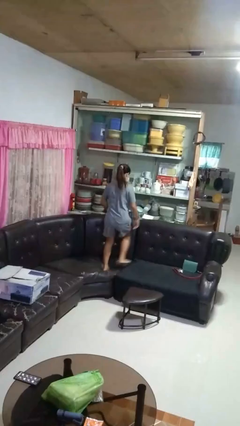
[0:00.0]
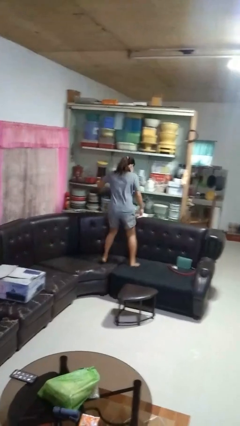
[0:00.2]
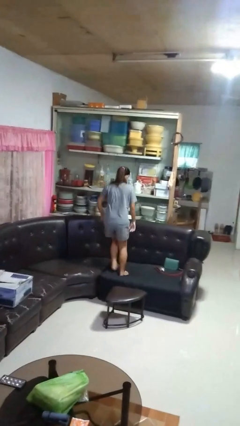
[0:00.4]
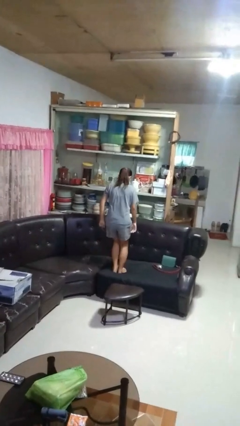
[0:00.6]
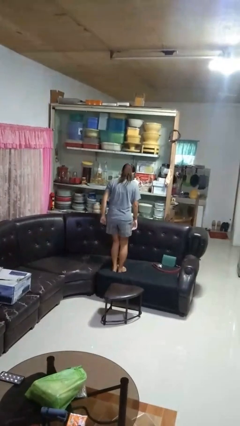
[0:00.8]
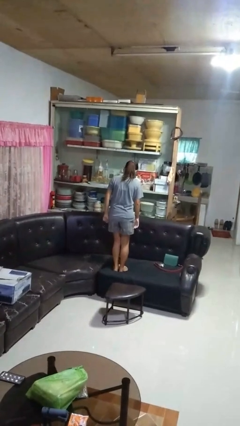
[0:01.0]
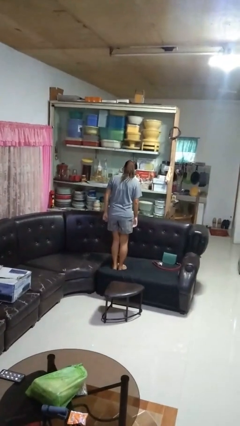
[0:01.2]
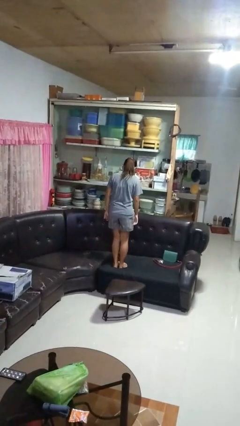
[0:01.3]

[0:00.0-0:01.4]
person jumps on couch

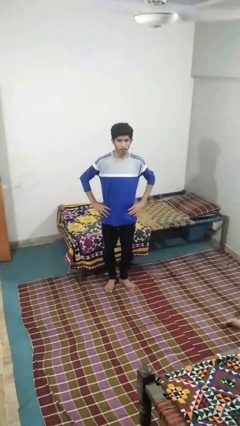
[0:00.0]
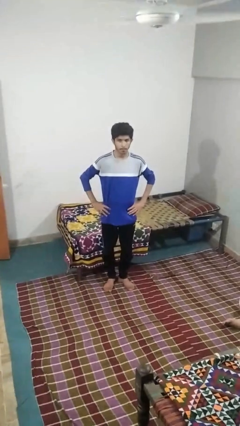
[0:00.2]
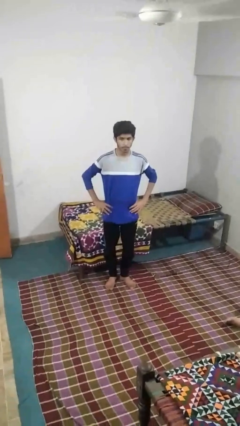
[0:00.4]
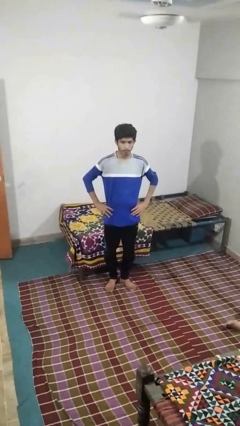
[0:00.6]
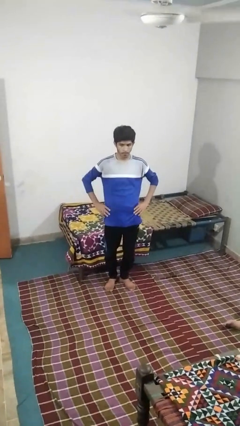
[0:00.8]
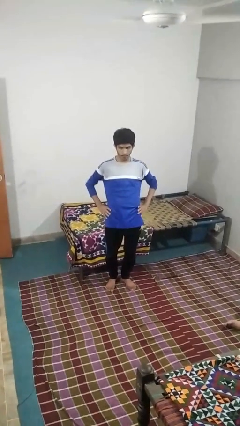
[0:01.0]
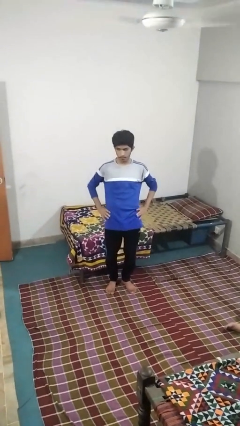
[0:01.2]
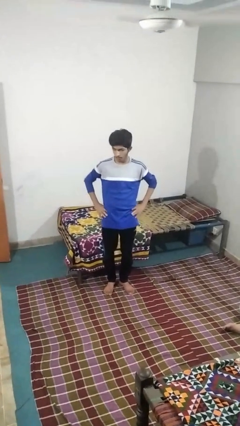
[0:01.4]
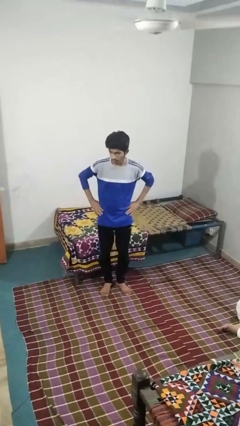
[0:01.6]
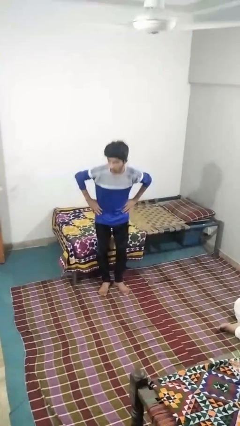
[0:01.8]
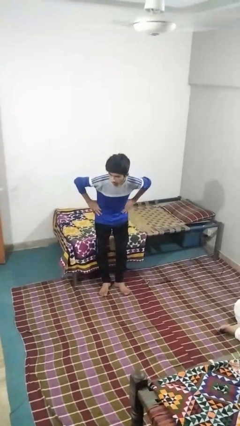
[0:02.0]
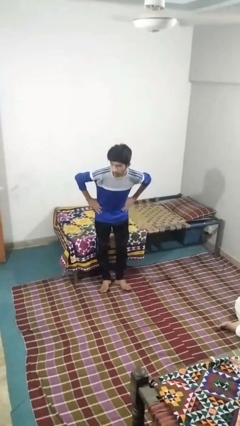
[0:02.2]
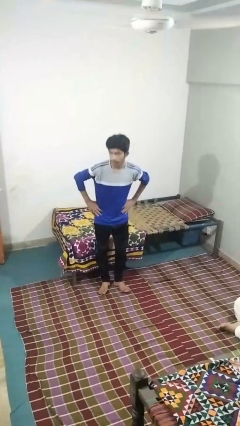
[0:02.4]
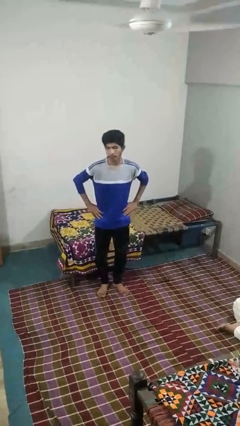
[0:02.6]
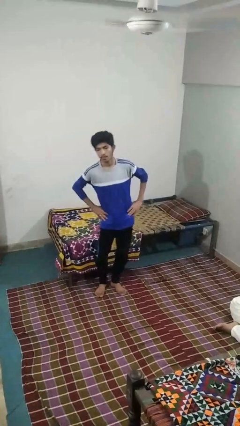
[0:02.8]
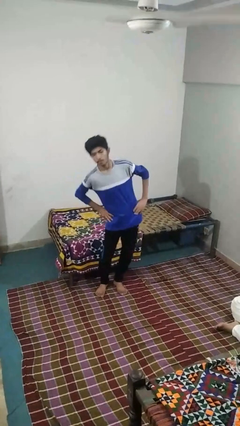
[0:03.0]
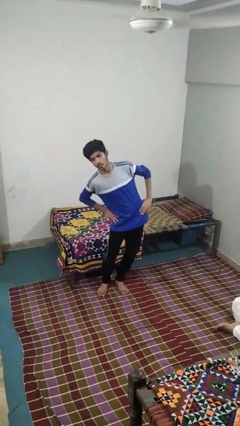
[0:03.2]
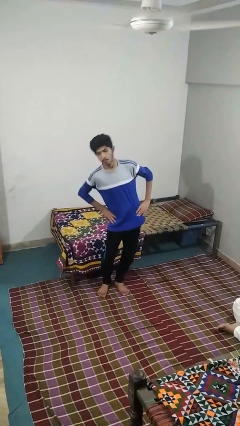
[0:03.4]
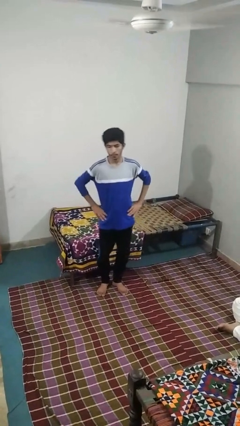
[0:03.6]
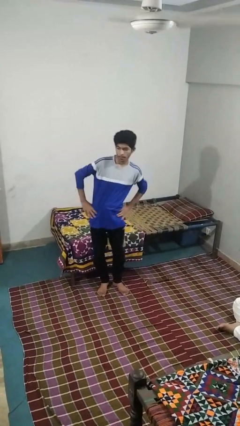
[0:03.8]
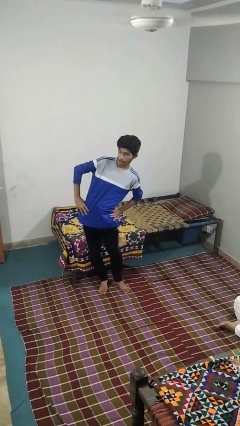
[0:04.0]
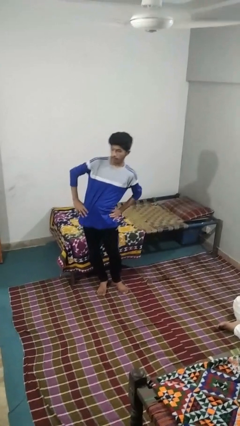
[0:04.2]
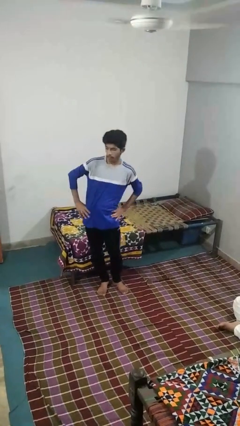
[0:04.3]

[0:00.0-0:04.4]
person wiggles hips

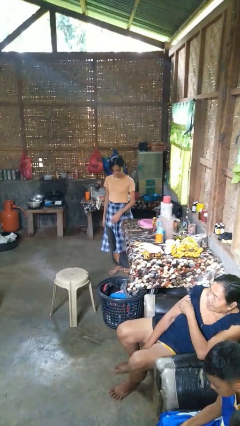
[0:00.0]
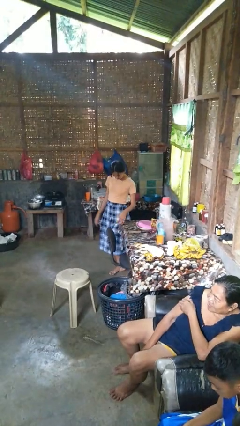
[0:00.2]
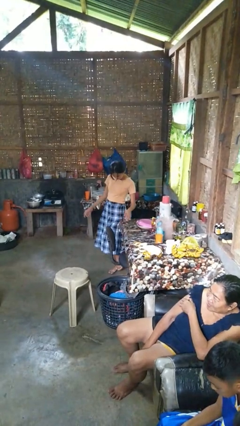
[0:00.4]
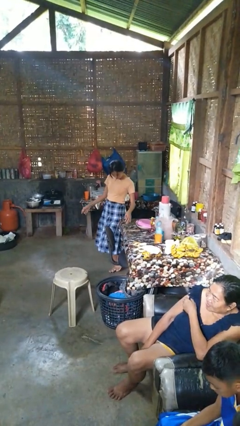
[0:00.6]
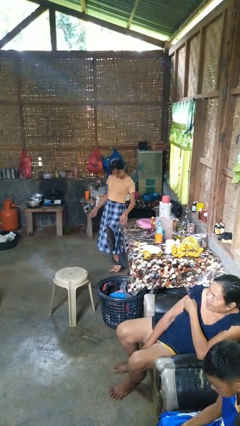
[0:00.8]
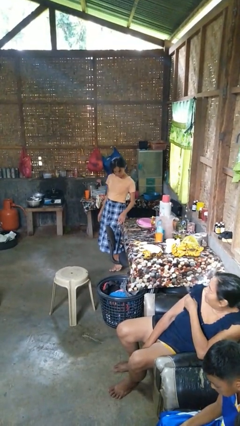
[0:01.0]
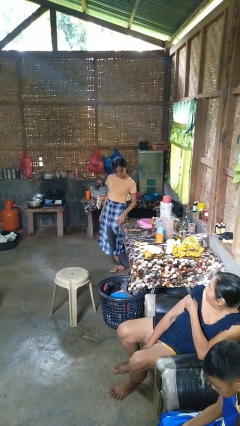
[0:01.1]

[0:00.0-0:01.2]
person bumps into table

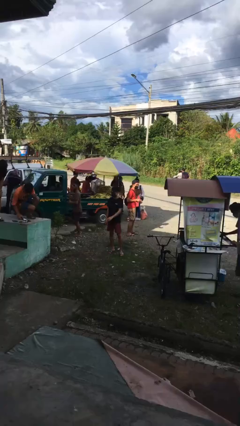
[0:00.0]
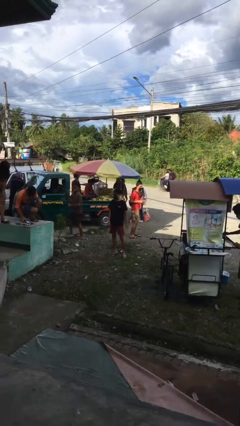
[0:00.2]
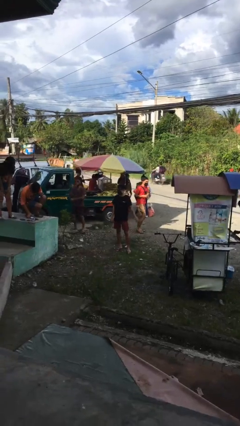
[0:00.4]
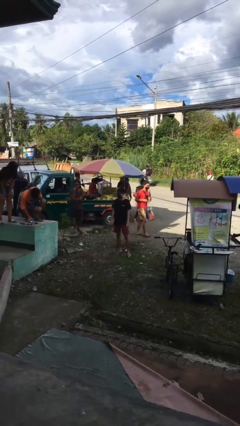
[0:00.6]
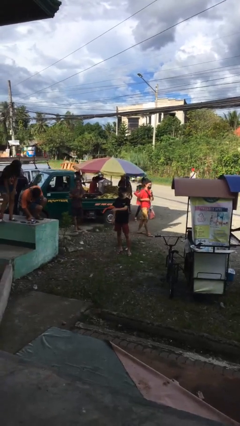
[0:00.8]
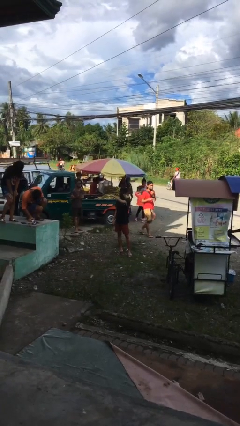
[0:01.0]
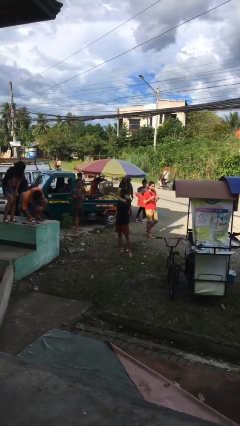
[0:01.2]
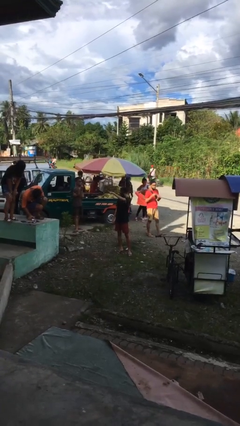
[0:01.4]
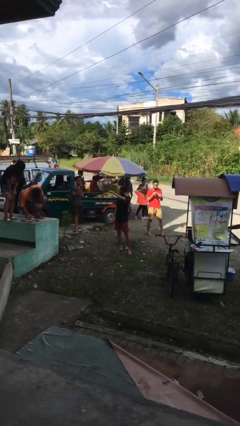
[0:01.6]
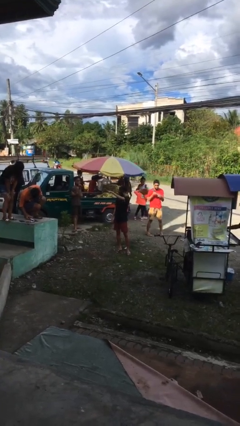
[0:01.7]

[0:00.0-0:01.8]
person points at person

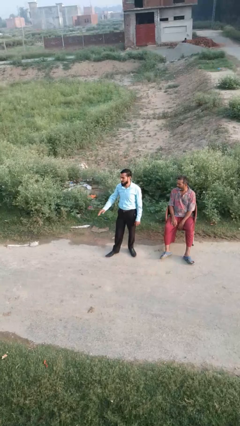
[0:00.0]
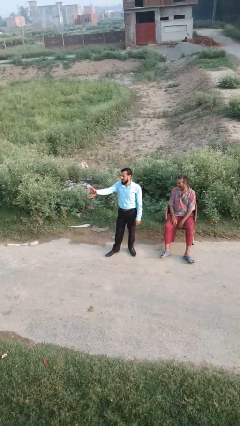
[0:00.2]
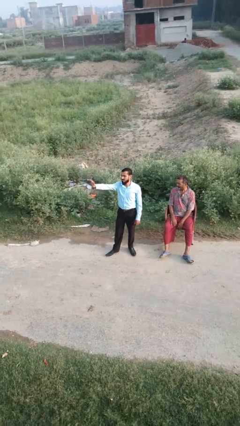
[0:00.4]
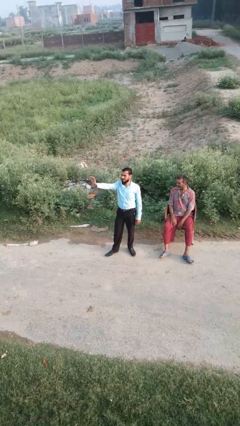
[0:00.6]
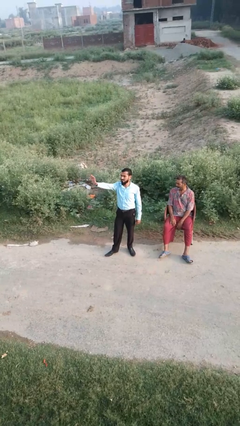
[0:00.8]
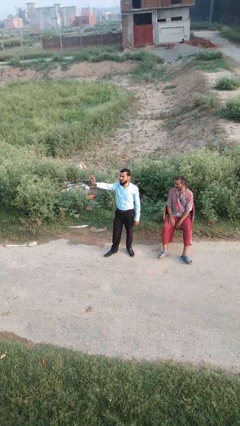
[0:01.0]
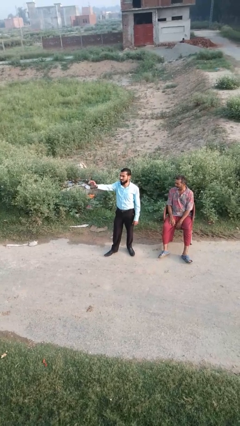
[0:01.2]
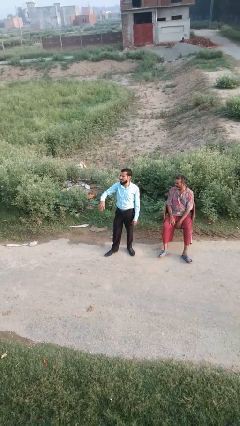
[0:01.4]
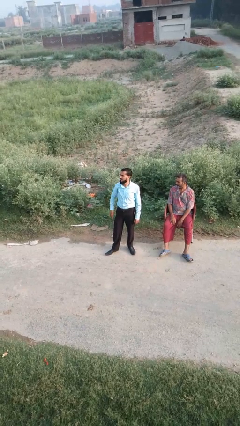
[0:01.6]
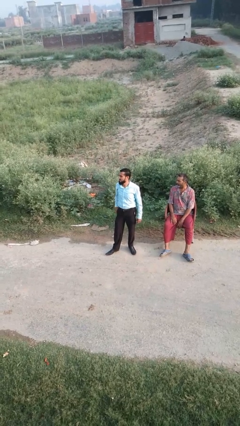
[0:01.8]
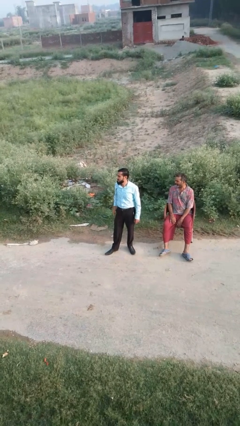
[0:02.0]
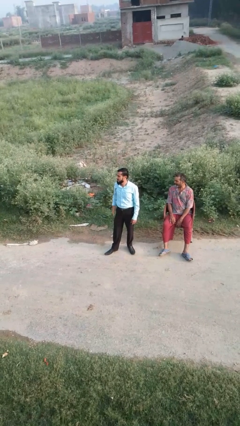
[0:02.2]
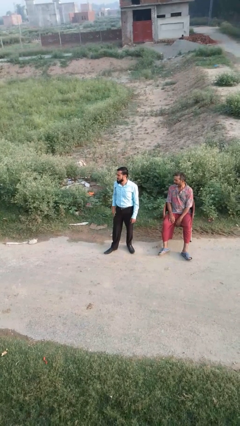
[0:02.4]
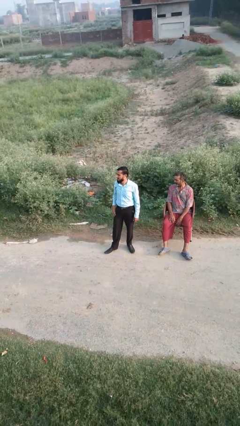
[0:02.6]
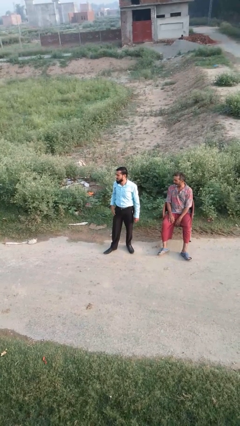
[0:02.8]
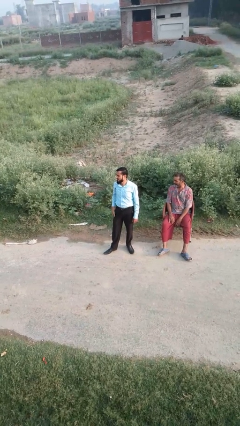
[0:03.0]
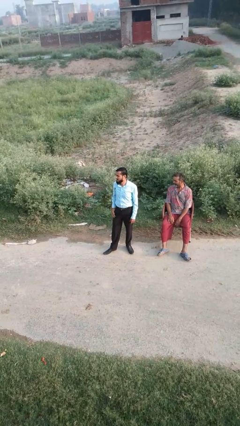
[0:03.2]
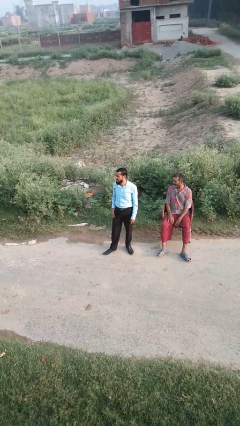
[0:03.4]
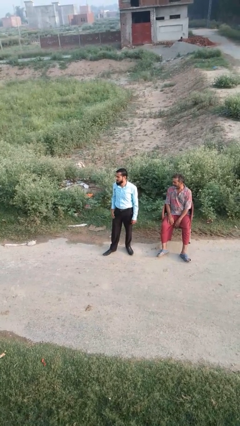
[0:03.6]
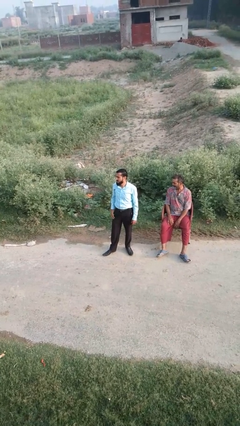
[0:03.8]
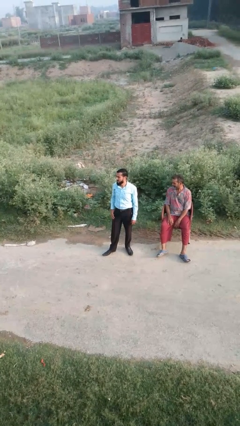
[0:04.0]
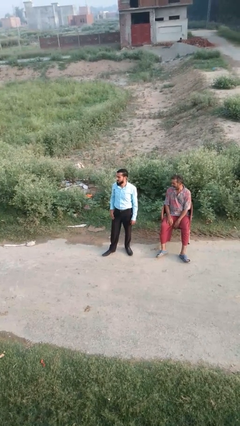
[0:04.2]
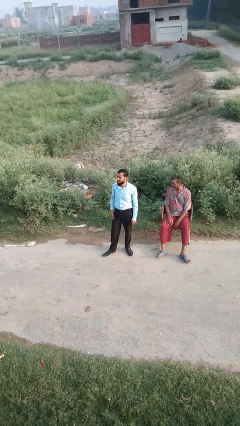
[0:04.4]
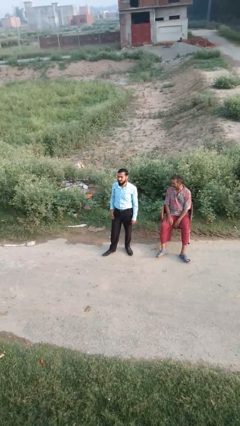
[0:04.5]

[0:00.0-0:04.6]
person waves at person

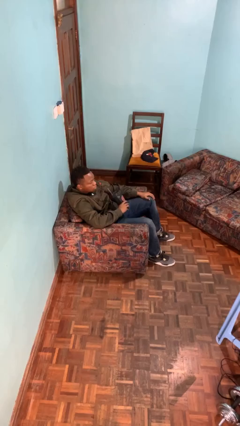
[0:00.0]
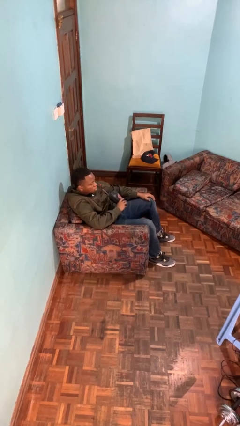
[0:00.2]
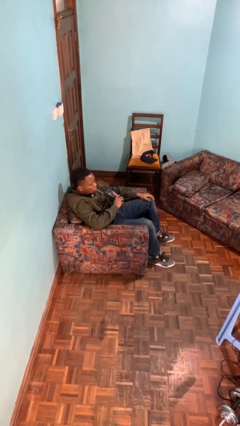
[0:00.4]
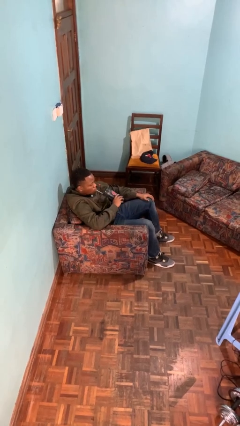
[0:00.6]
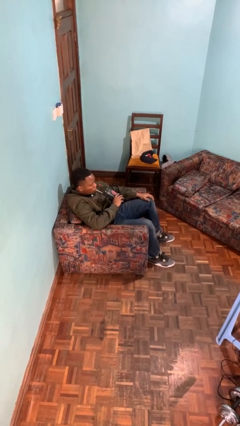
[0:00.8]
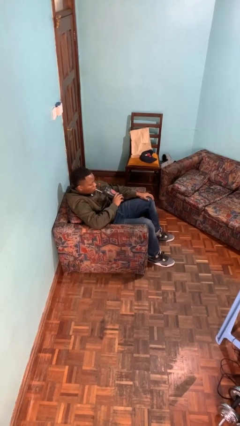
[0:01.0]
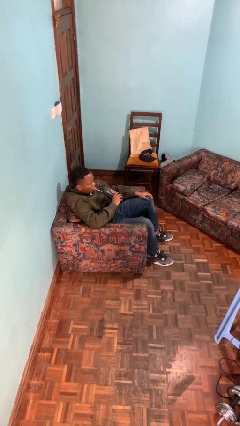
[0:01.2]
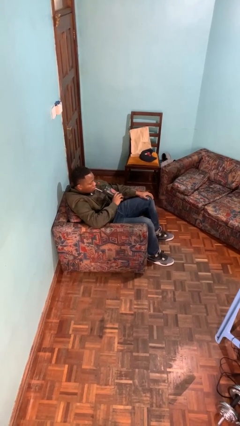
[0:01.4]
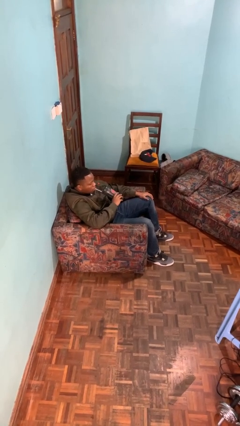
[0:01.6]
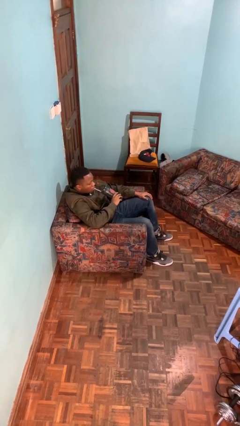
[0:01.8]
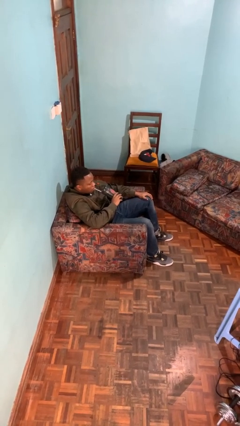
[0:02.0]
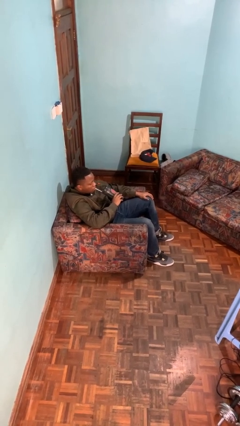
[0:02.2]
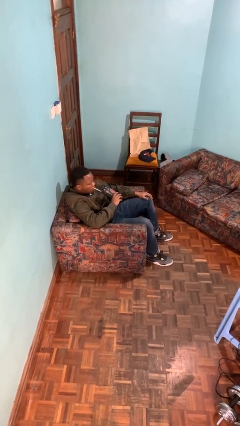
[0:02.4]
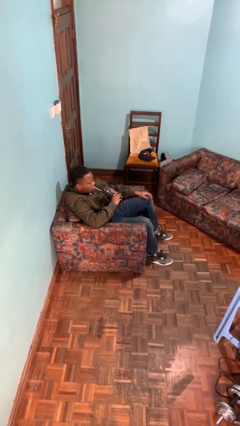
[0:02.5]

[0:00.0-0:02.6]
person drinks from straw

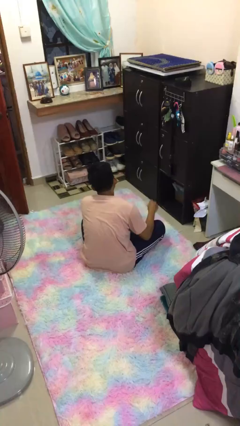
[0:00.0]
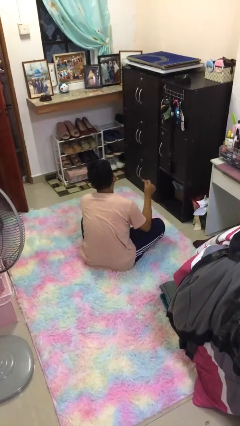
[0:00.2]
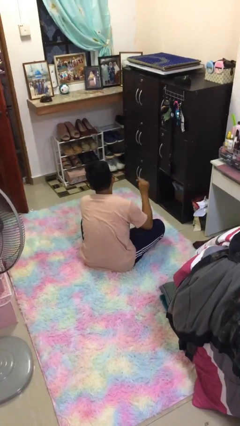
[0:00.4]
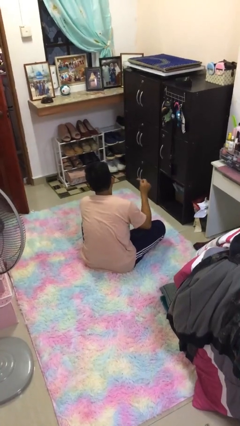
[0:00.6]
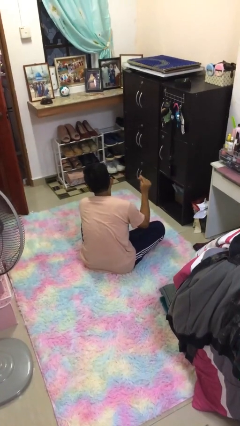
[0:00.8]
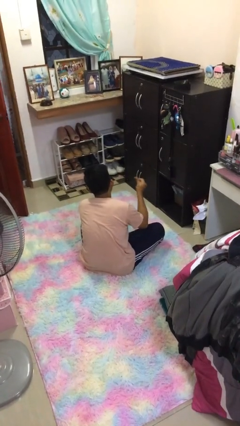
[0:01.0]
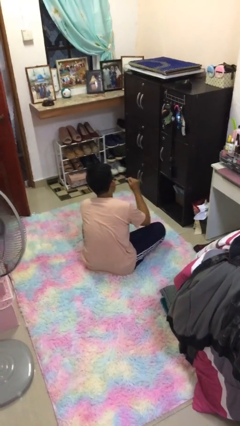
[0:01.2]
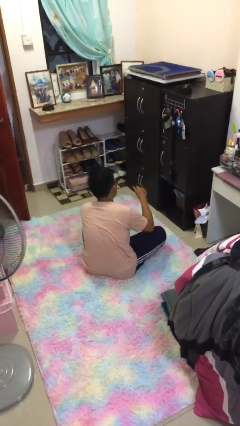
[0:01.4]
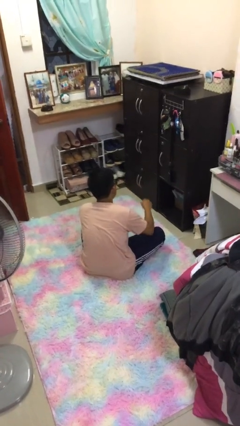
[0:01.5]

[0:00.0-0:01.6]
person snaps fingers
